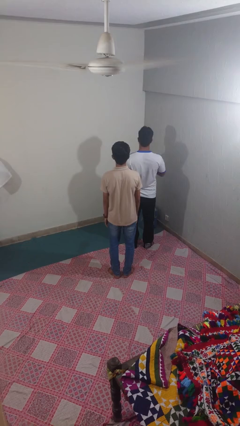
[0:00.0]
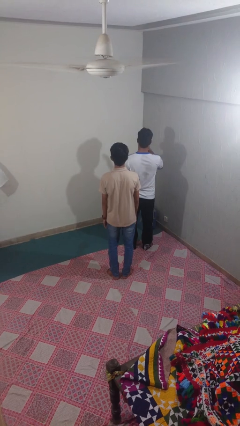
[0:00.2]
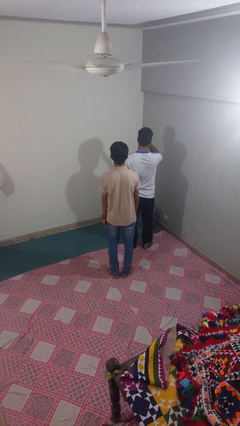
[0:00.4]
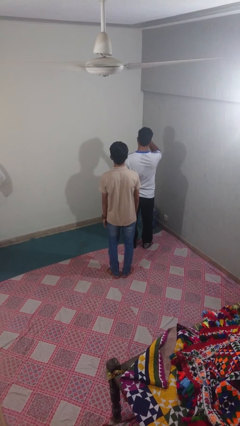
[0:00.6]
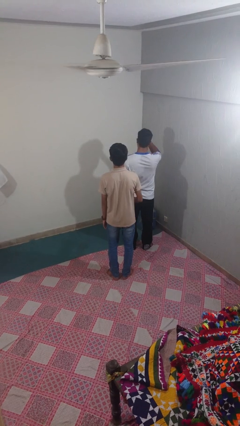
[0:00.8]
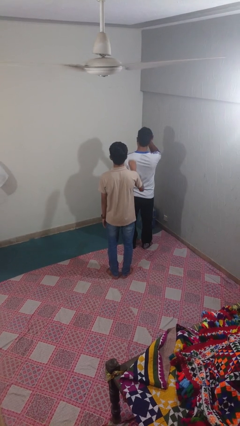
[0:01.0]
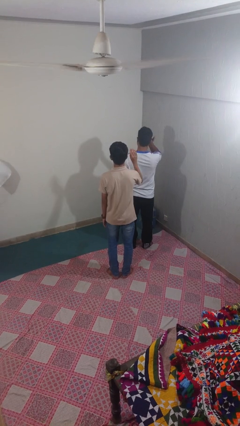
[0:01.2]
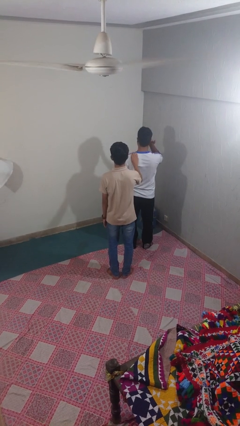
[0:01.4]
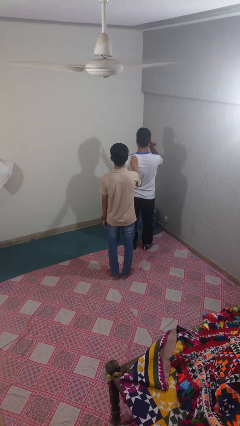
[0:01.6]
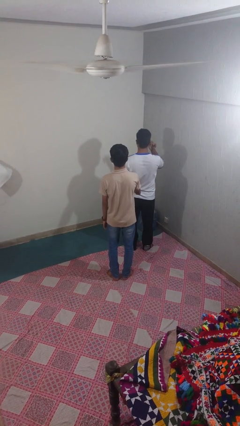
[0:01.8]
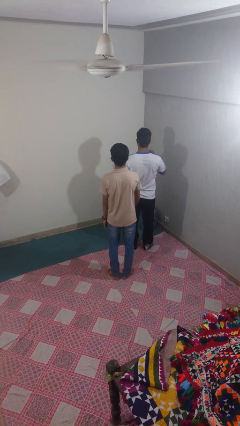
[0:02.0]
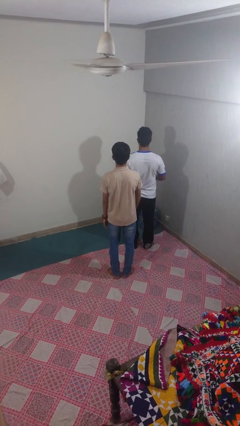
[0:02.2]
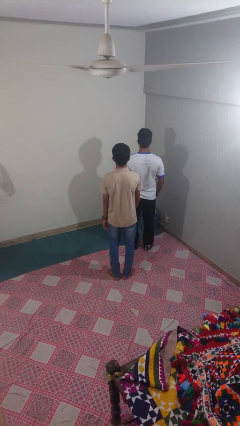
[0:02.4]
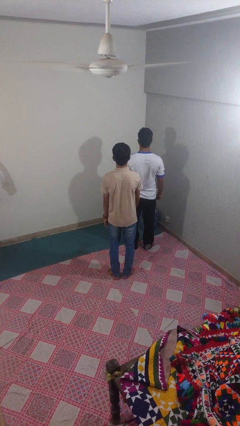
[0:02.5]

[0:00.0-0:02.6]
person touches back of person

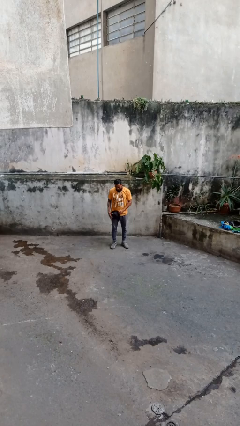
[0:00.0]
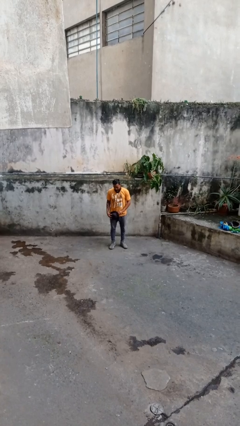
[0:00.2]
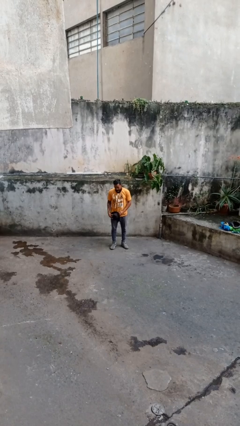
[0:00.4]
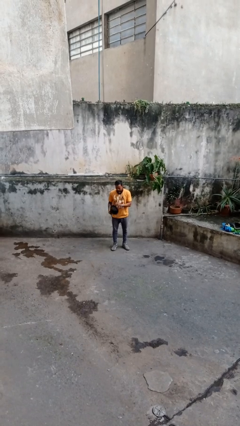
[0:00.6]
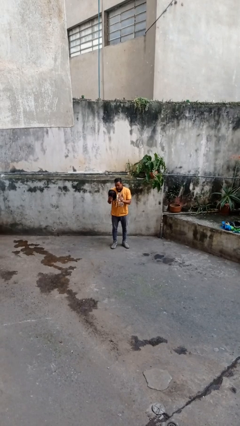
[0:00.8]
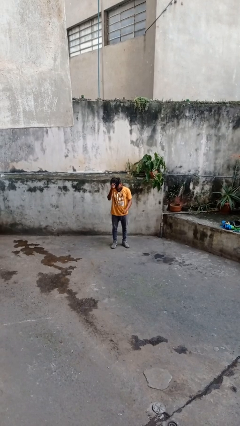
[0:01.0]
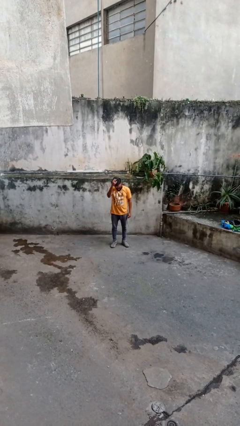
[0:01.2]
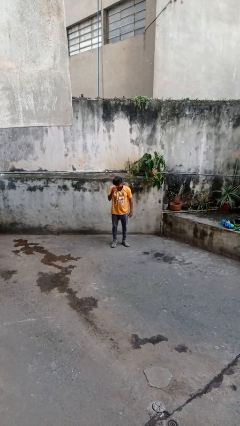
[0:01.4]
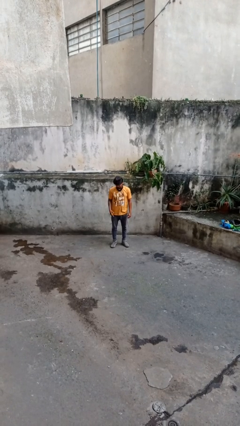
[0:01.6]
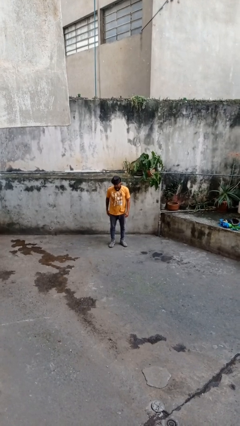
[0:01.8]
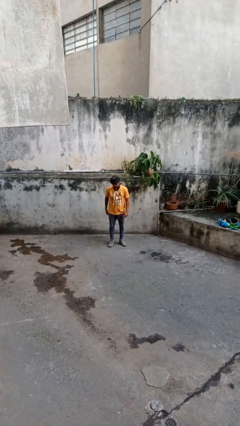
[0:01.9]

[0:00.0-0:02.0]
person puts on hat

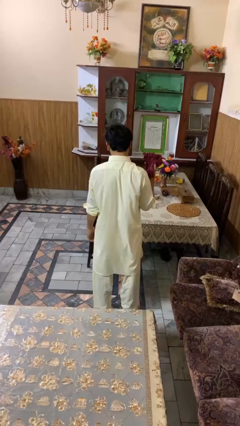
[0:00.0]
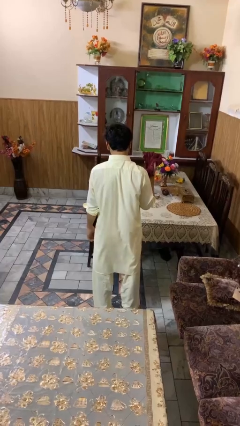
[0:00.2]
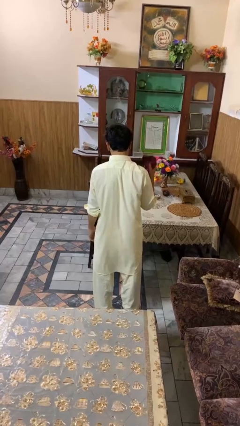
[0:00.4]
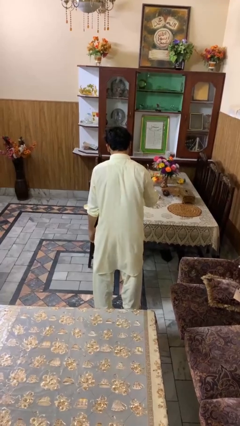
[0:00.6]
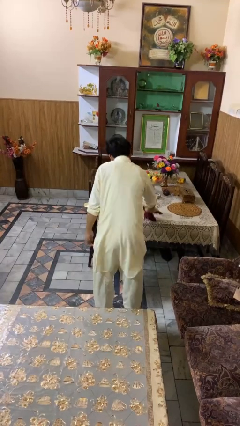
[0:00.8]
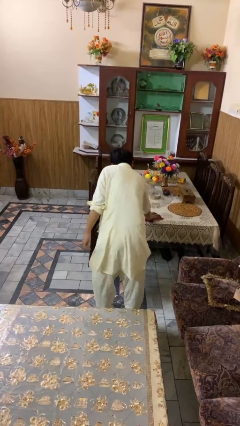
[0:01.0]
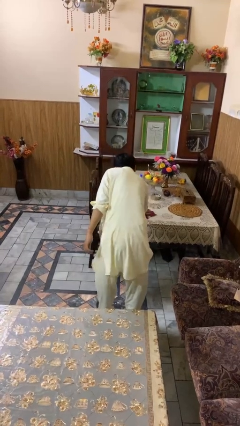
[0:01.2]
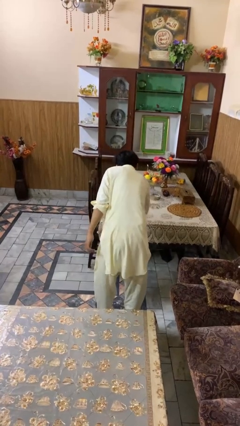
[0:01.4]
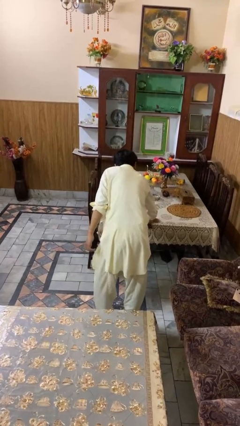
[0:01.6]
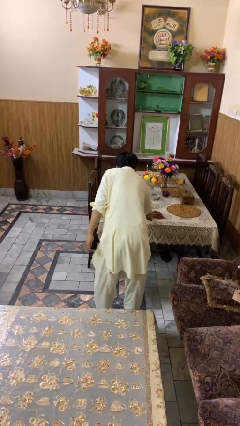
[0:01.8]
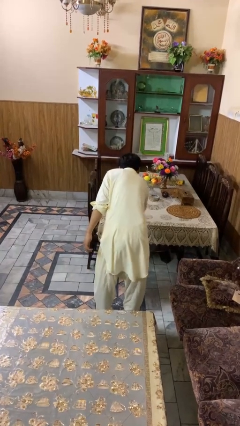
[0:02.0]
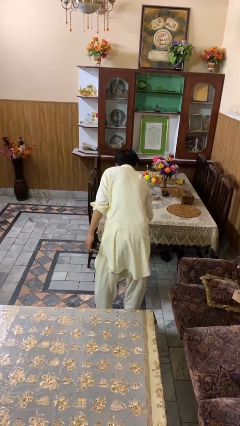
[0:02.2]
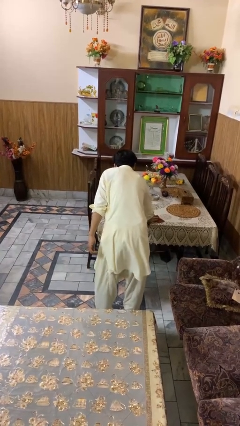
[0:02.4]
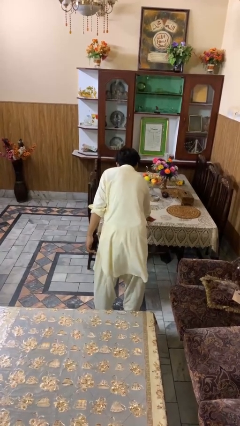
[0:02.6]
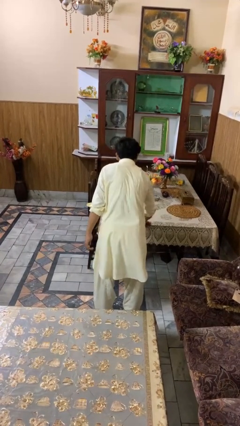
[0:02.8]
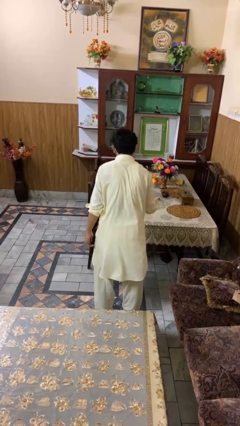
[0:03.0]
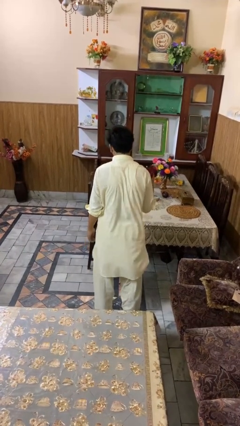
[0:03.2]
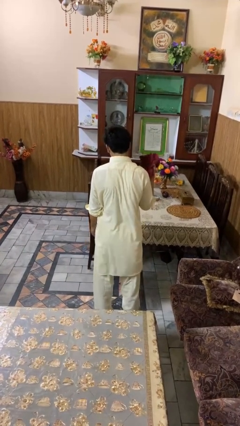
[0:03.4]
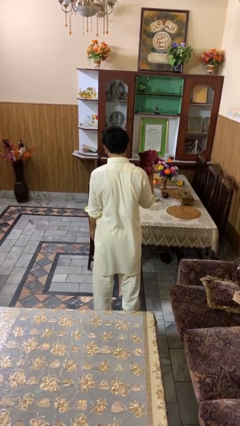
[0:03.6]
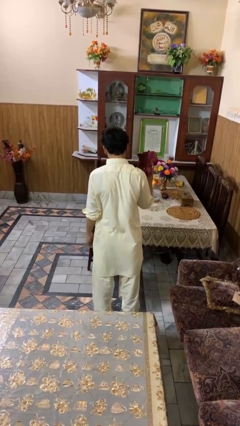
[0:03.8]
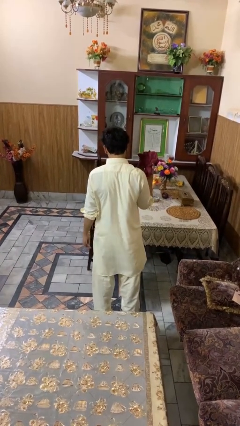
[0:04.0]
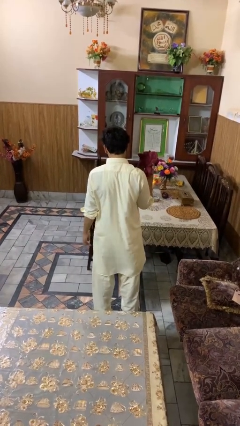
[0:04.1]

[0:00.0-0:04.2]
person cleans table with rag

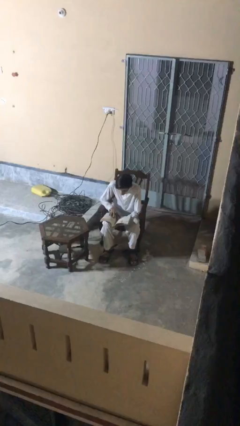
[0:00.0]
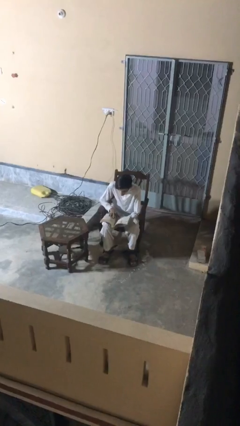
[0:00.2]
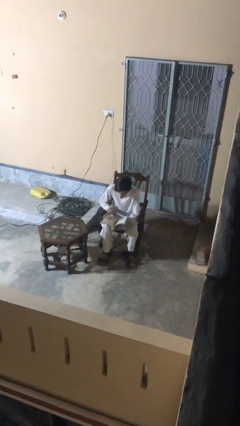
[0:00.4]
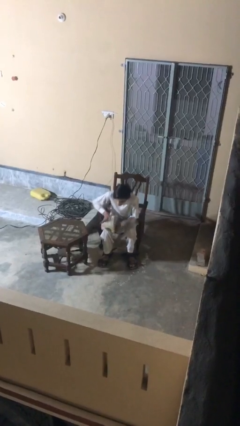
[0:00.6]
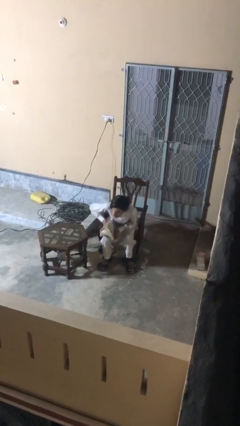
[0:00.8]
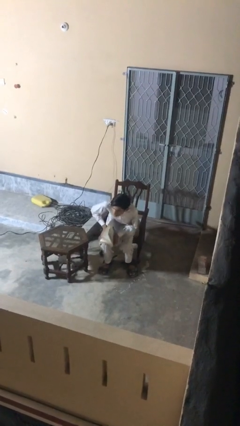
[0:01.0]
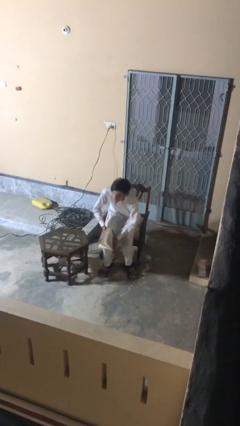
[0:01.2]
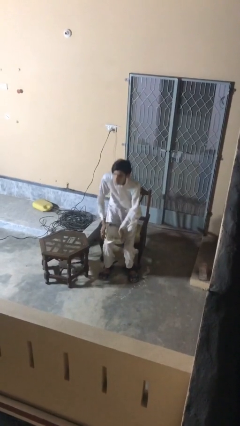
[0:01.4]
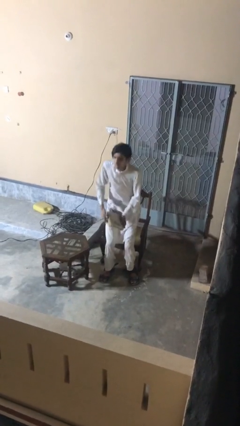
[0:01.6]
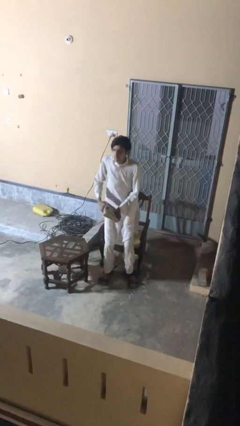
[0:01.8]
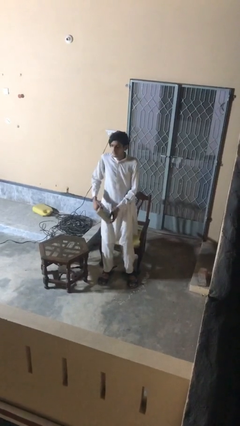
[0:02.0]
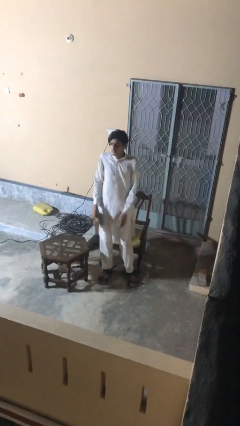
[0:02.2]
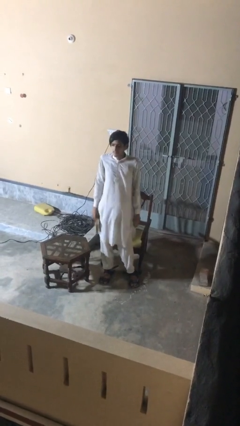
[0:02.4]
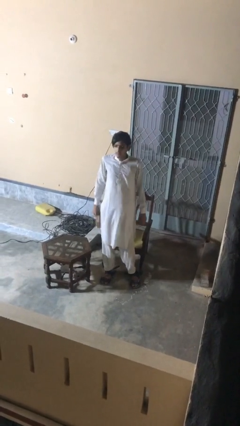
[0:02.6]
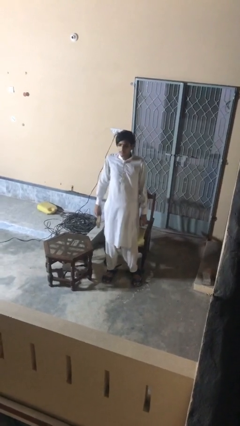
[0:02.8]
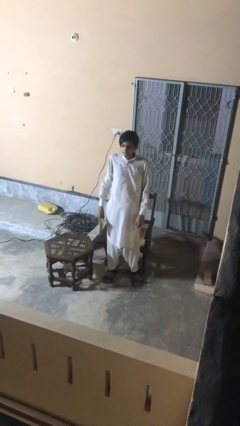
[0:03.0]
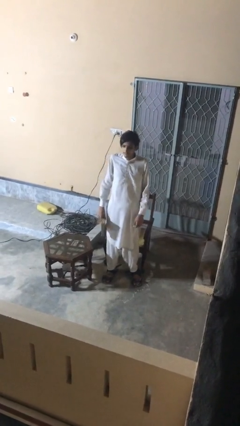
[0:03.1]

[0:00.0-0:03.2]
person stands up

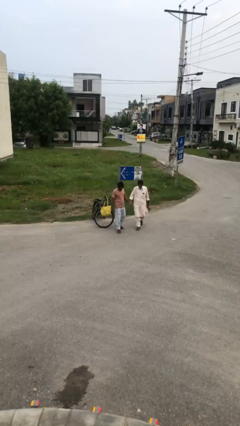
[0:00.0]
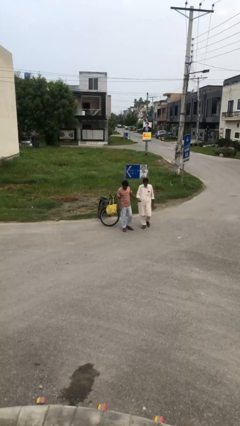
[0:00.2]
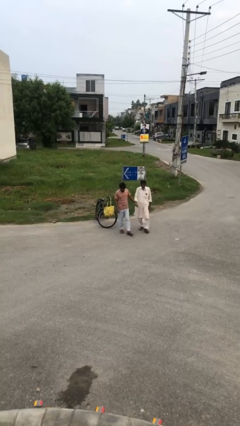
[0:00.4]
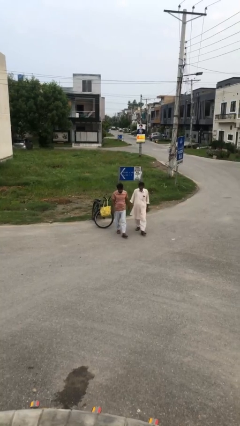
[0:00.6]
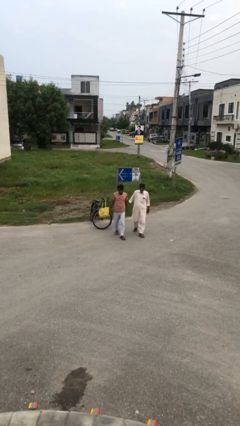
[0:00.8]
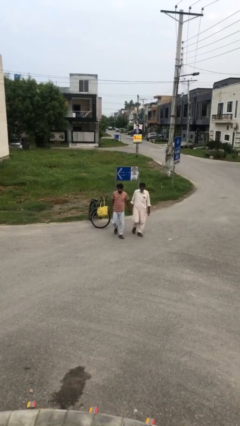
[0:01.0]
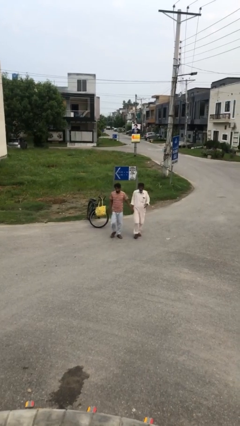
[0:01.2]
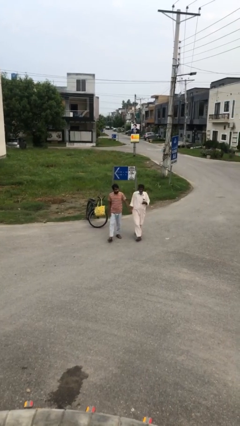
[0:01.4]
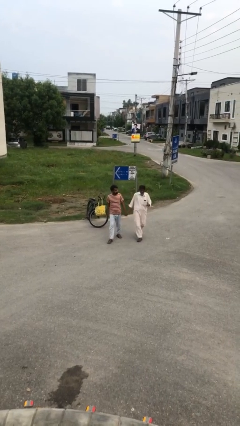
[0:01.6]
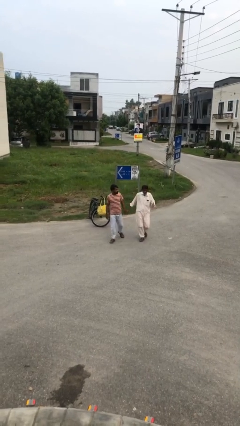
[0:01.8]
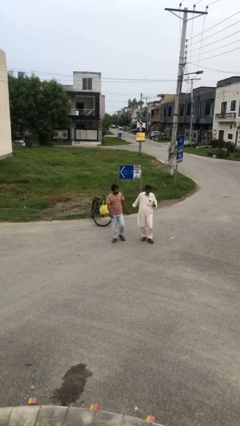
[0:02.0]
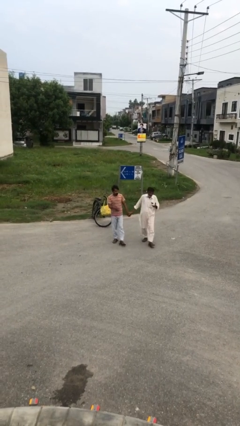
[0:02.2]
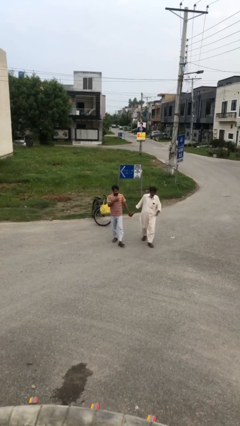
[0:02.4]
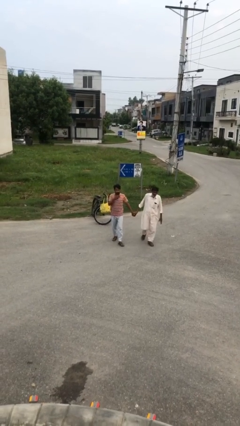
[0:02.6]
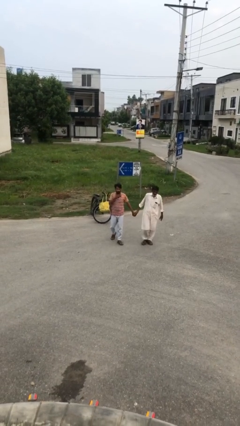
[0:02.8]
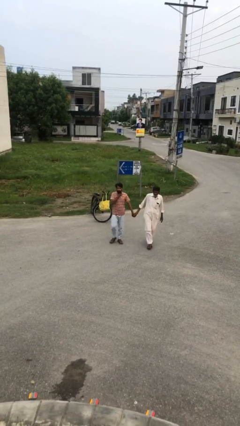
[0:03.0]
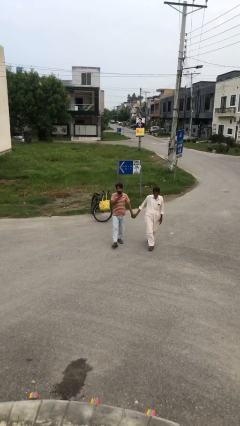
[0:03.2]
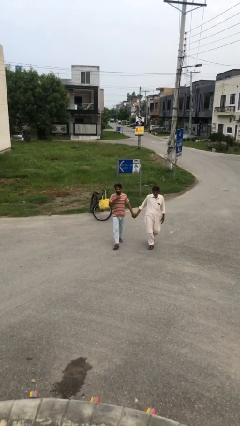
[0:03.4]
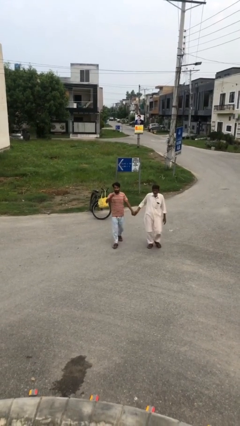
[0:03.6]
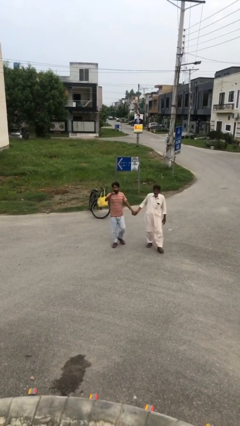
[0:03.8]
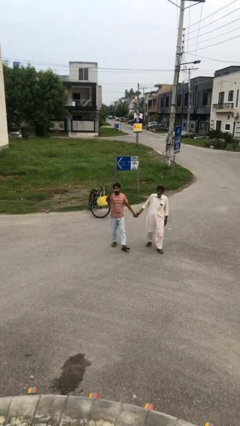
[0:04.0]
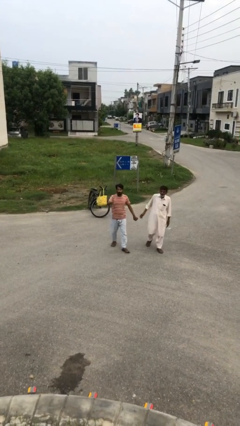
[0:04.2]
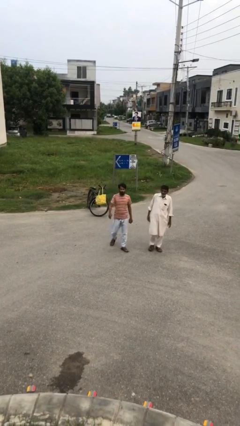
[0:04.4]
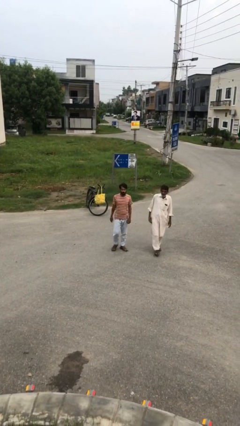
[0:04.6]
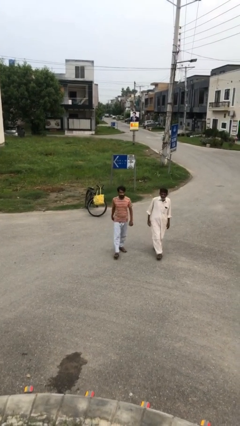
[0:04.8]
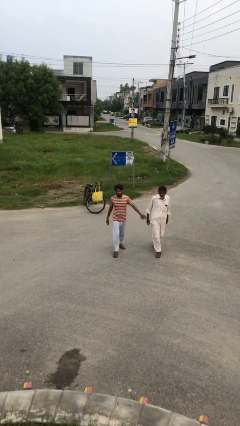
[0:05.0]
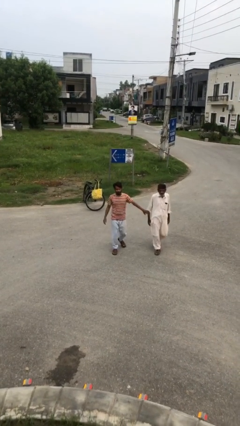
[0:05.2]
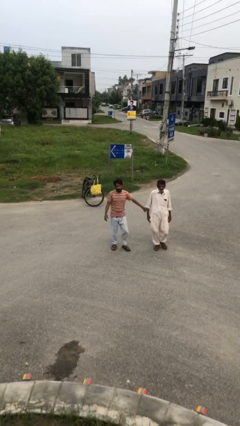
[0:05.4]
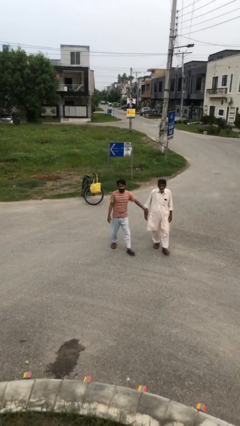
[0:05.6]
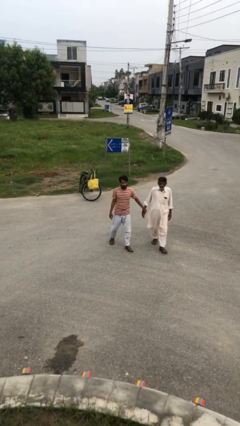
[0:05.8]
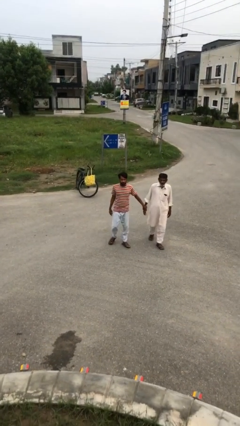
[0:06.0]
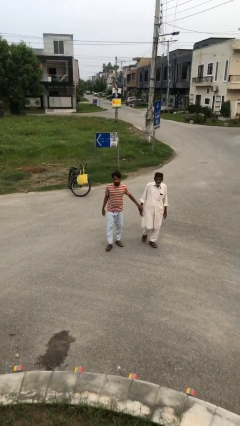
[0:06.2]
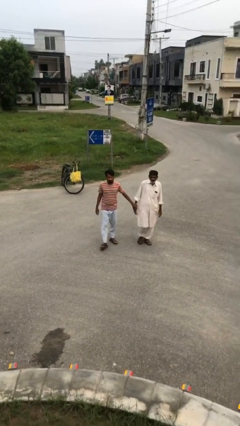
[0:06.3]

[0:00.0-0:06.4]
person holds hand
